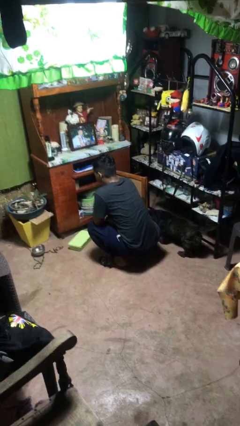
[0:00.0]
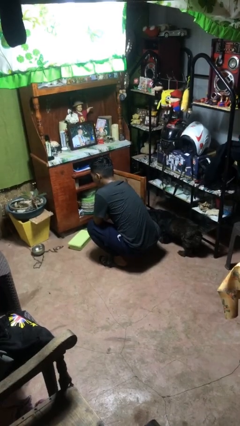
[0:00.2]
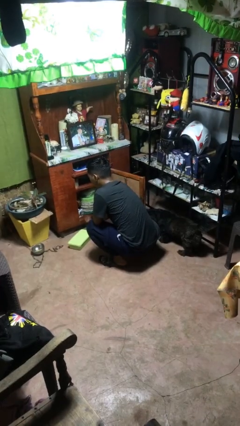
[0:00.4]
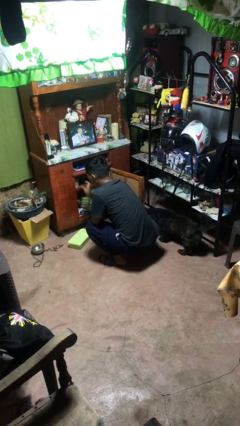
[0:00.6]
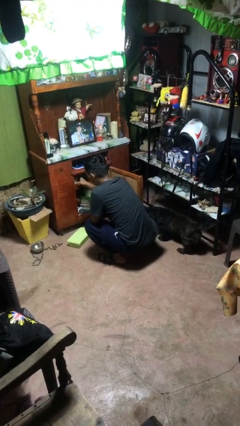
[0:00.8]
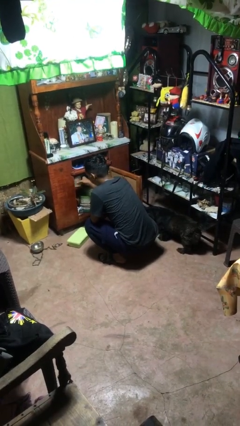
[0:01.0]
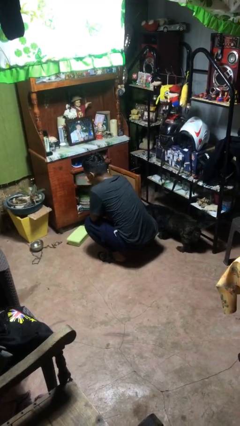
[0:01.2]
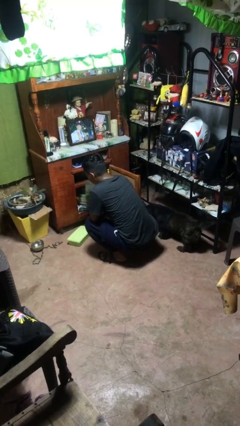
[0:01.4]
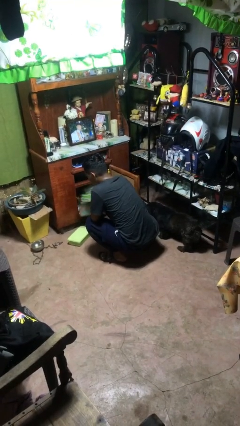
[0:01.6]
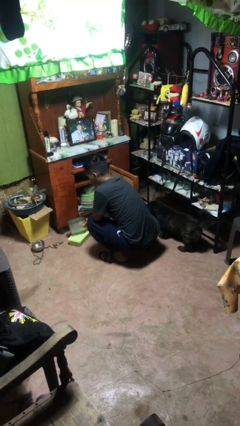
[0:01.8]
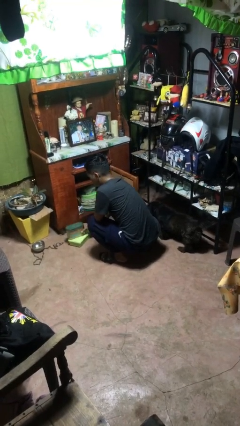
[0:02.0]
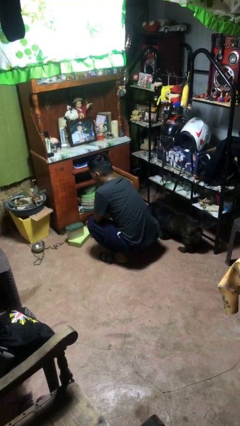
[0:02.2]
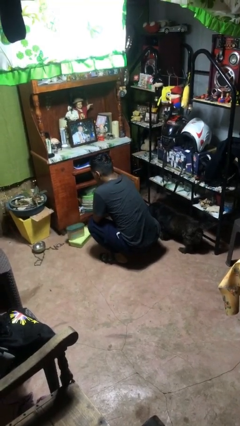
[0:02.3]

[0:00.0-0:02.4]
person takes object from cabinet

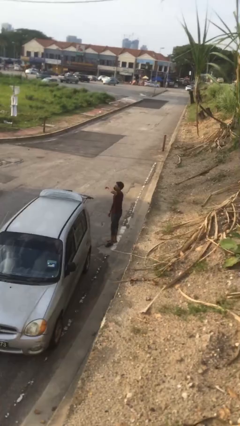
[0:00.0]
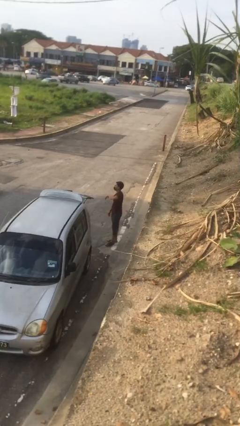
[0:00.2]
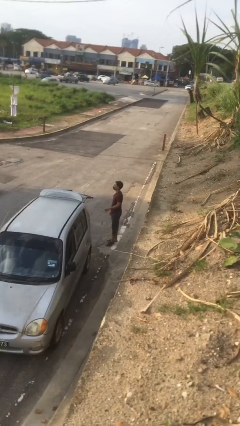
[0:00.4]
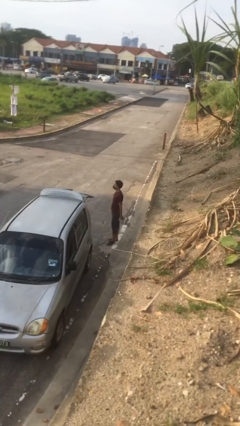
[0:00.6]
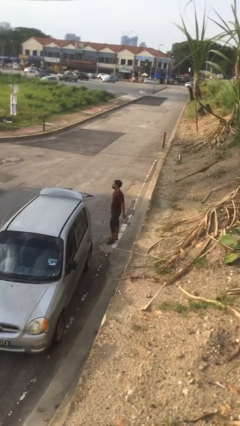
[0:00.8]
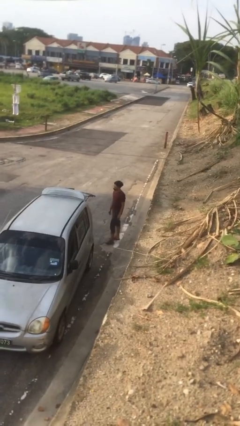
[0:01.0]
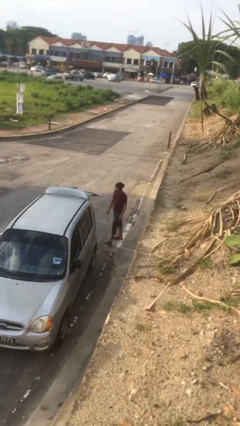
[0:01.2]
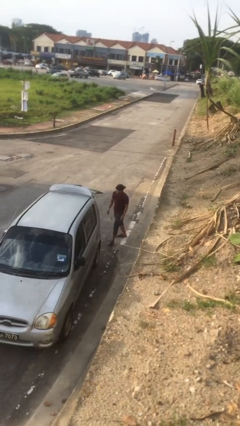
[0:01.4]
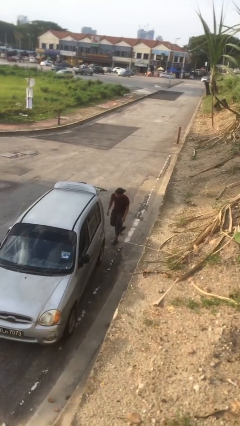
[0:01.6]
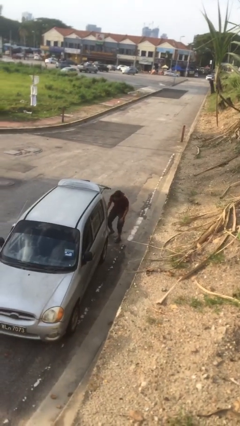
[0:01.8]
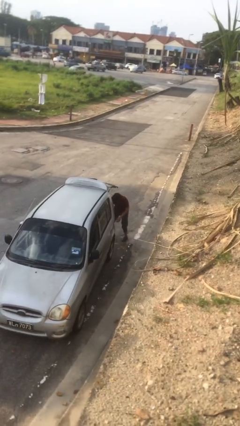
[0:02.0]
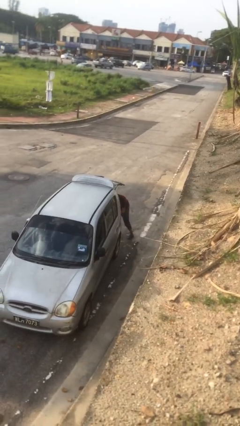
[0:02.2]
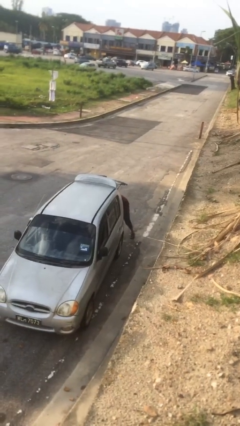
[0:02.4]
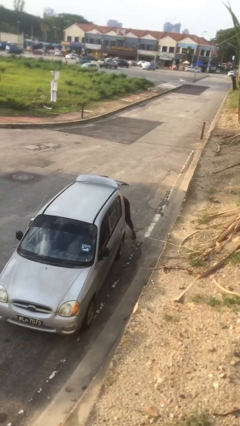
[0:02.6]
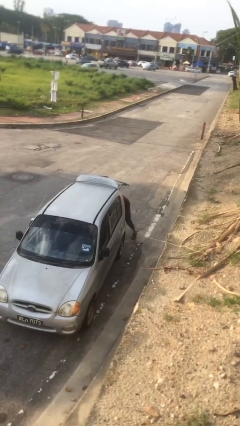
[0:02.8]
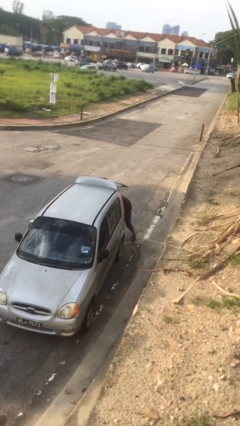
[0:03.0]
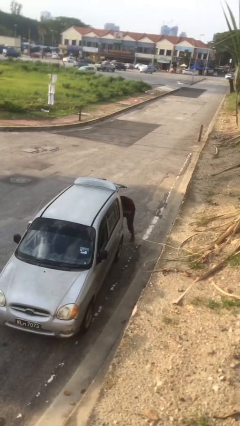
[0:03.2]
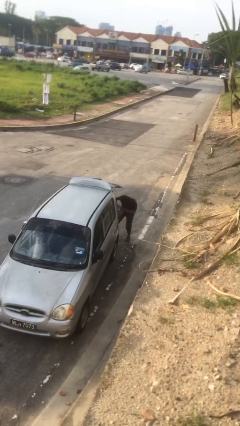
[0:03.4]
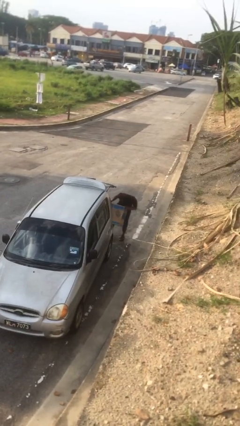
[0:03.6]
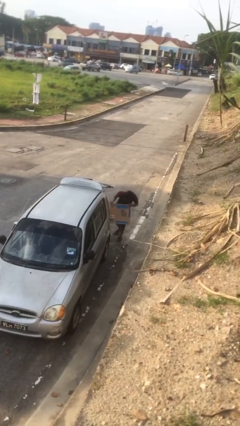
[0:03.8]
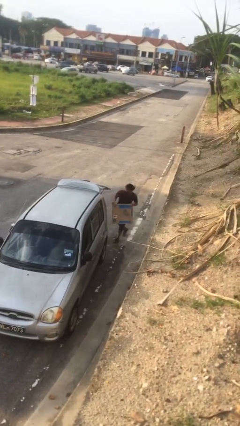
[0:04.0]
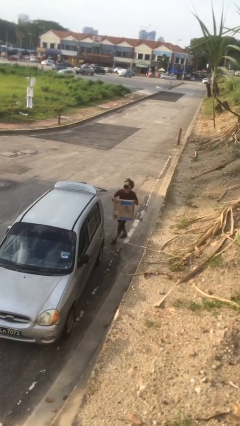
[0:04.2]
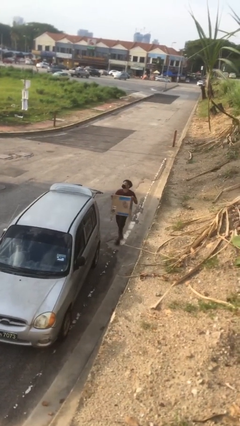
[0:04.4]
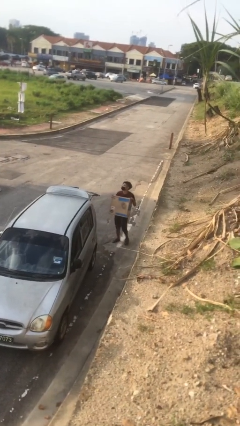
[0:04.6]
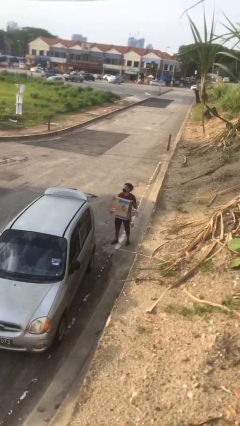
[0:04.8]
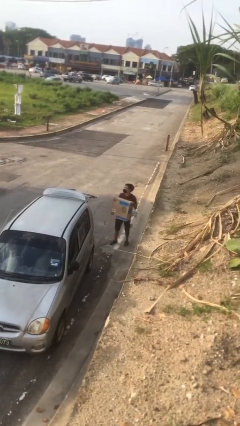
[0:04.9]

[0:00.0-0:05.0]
person unloads car

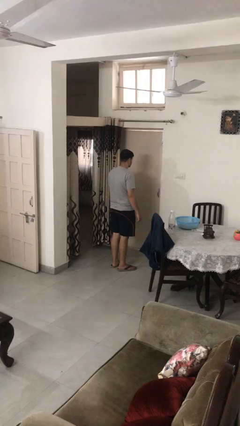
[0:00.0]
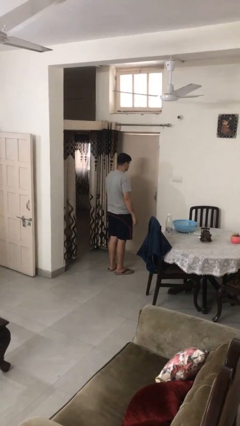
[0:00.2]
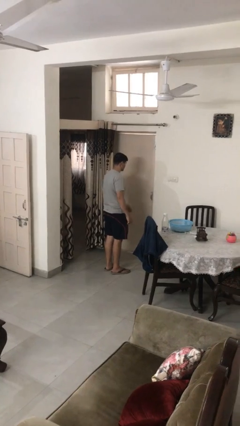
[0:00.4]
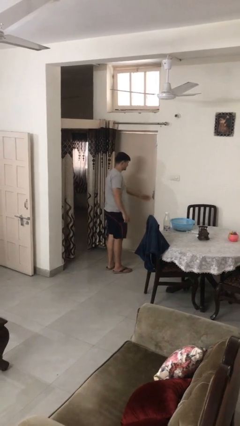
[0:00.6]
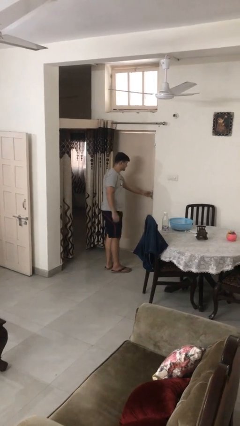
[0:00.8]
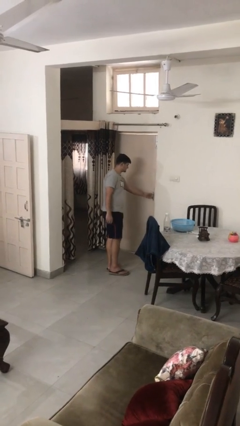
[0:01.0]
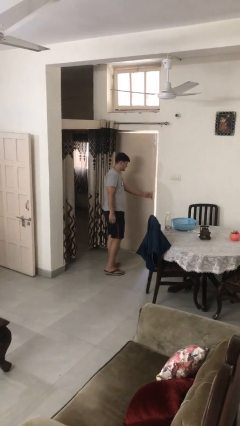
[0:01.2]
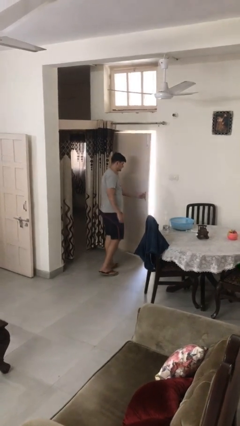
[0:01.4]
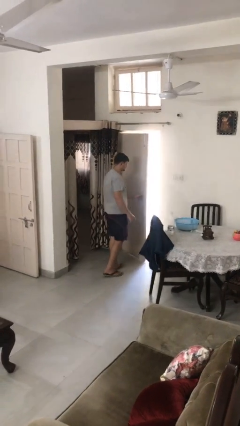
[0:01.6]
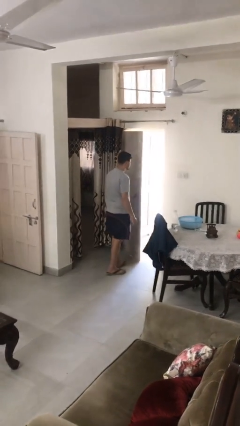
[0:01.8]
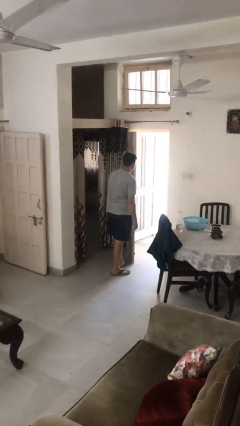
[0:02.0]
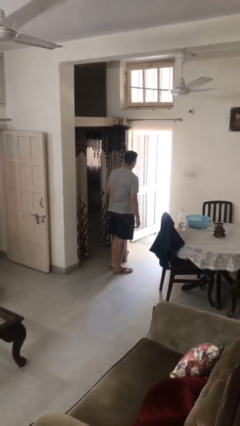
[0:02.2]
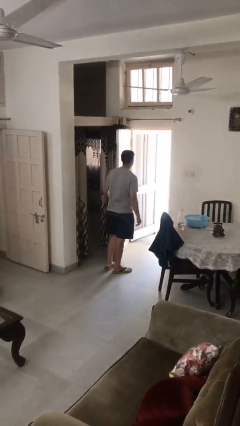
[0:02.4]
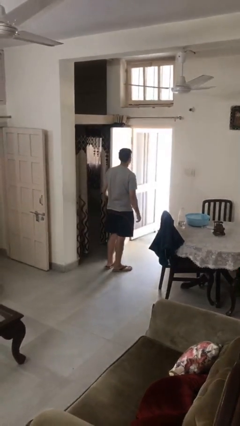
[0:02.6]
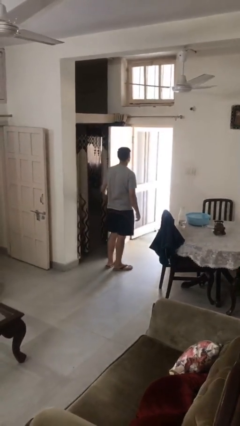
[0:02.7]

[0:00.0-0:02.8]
person opens facility door

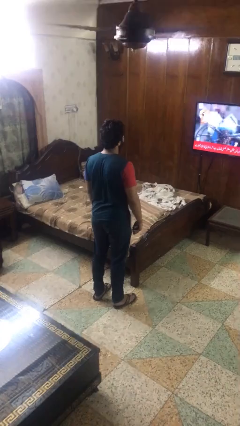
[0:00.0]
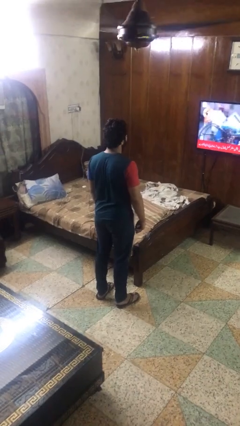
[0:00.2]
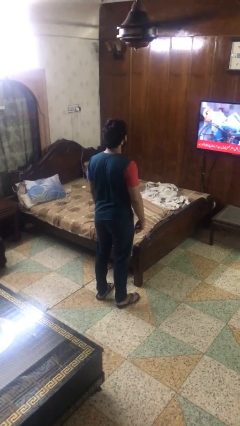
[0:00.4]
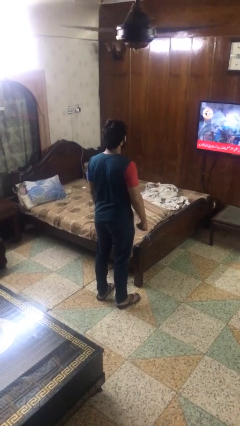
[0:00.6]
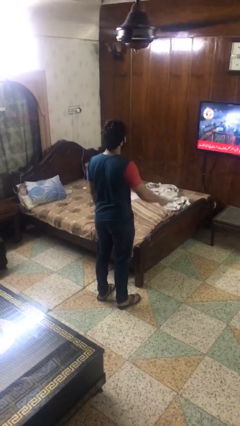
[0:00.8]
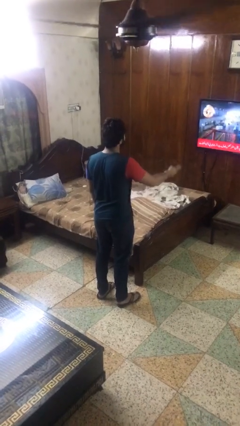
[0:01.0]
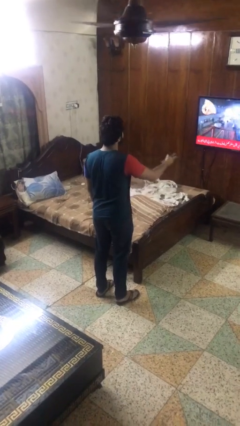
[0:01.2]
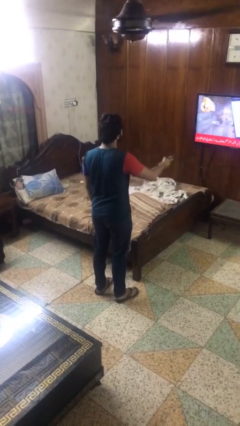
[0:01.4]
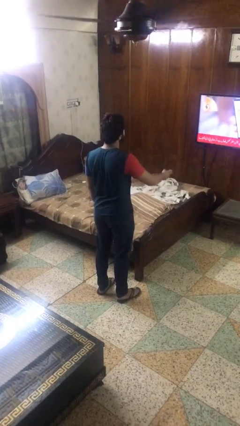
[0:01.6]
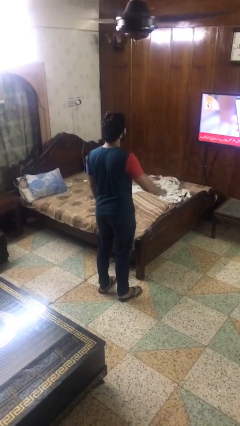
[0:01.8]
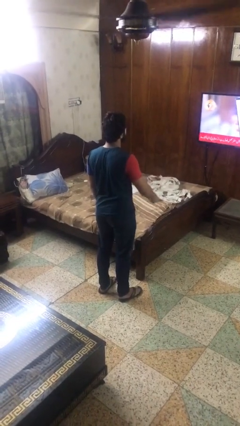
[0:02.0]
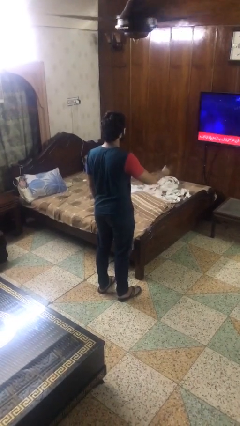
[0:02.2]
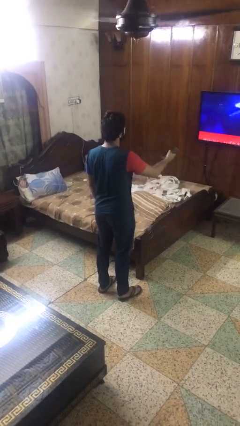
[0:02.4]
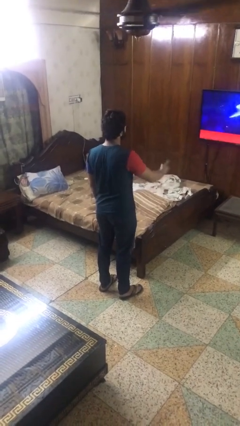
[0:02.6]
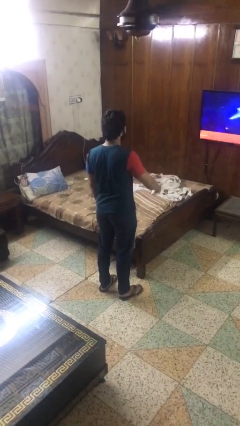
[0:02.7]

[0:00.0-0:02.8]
person uses television remote

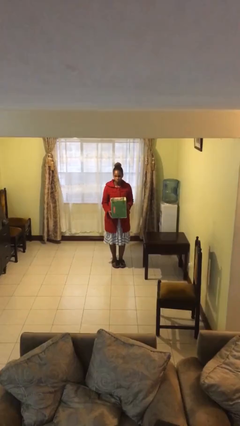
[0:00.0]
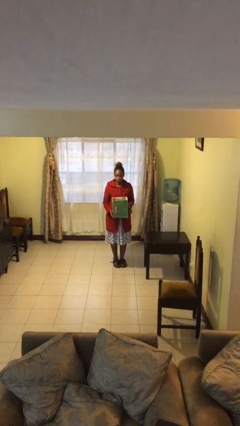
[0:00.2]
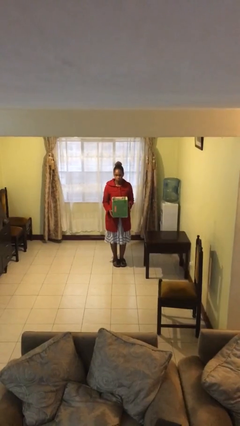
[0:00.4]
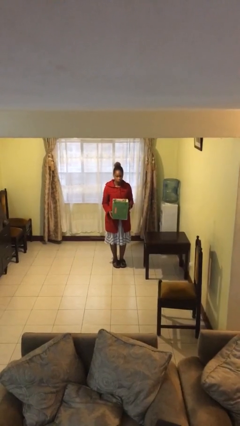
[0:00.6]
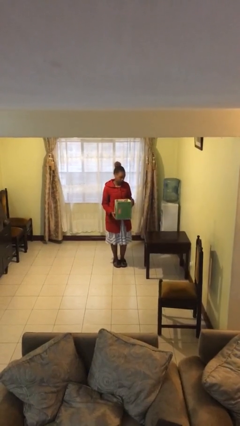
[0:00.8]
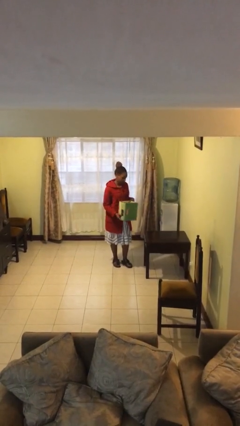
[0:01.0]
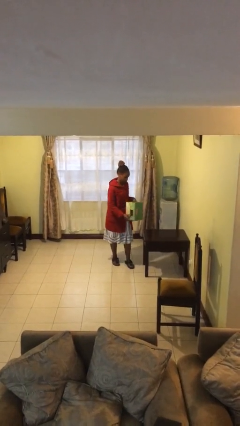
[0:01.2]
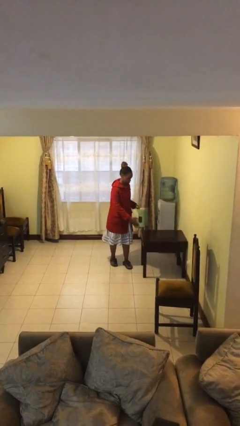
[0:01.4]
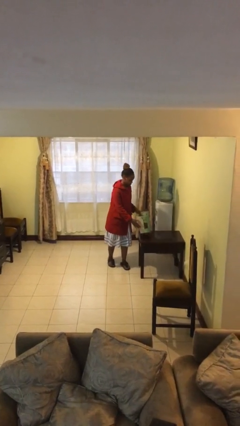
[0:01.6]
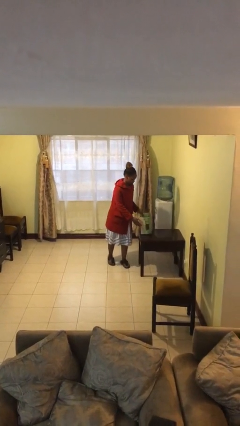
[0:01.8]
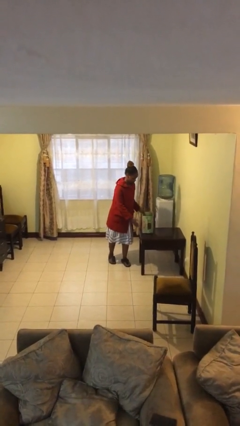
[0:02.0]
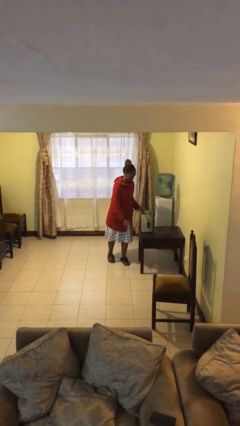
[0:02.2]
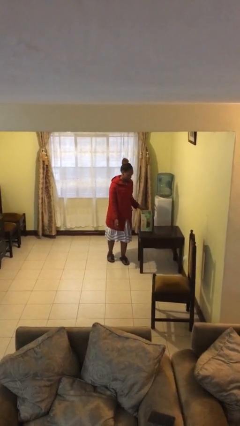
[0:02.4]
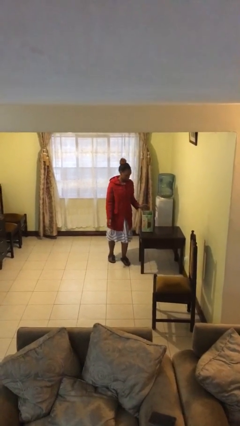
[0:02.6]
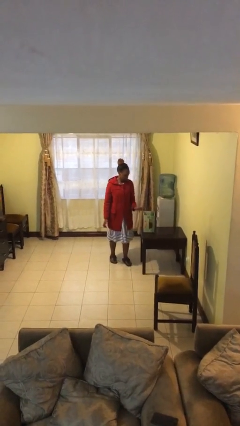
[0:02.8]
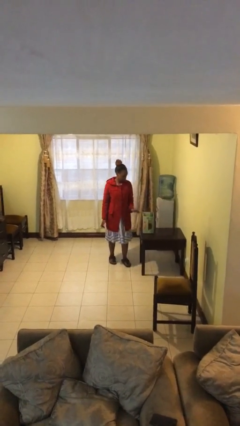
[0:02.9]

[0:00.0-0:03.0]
person puts down object on table

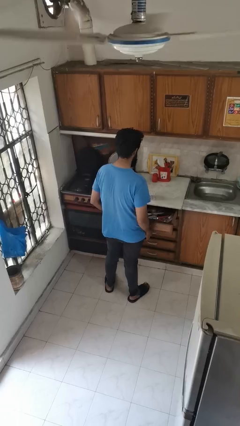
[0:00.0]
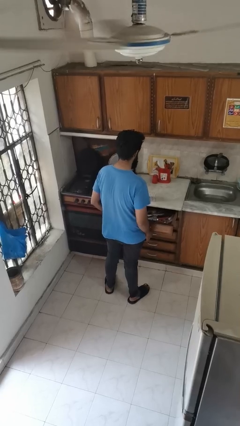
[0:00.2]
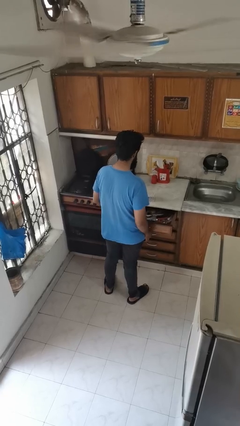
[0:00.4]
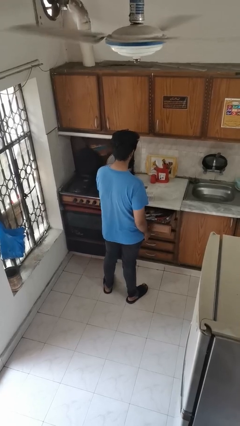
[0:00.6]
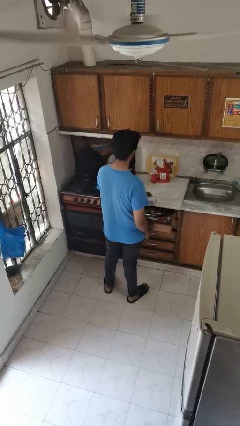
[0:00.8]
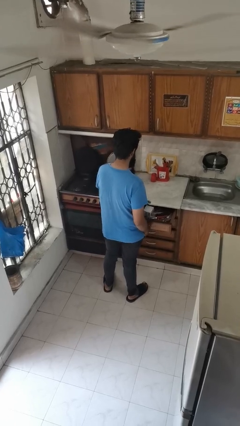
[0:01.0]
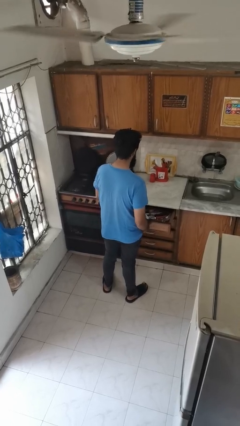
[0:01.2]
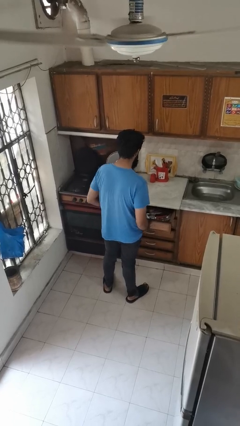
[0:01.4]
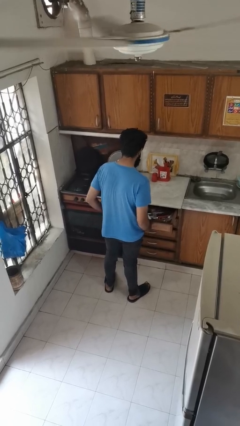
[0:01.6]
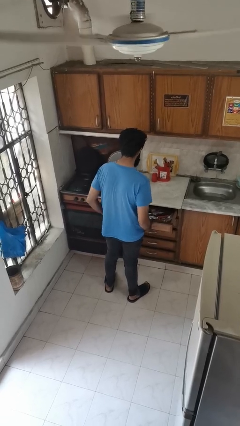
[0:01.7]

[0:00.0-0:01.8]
person puts object into kitchen drawer
